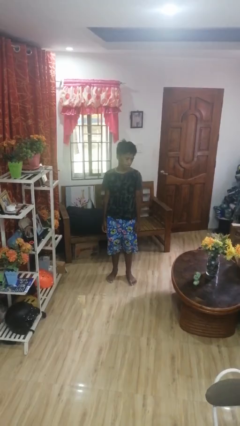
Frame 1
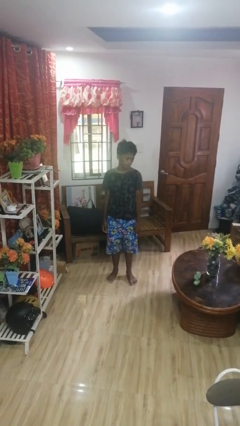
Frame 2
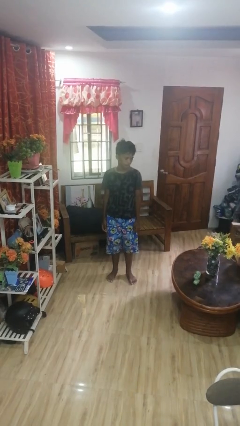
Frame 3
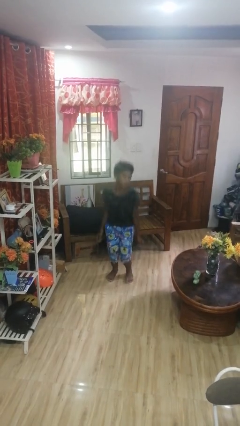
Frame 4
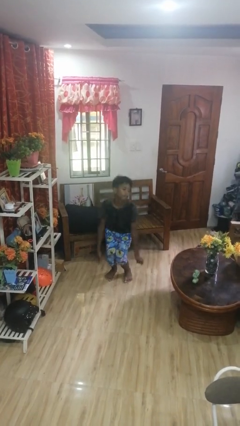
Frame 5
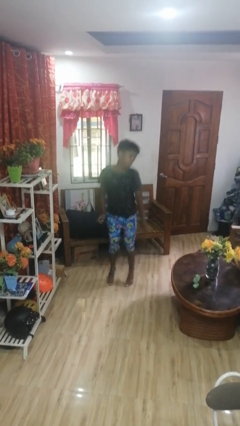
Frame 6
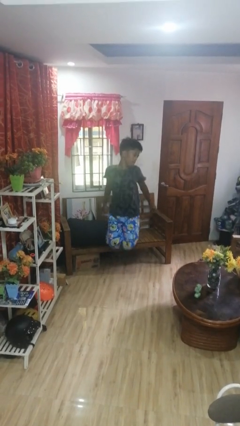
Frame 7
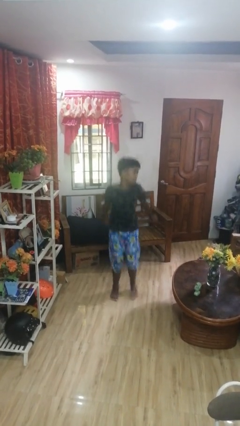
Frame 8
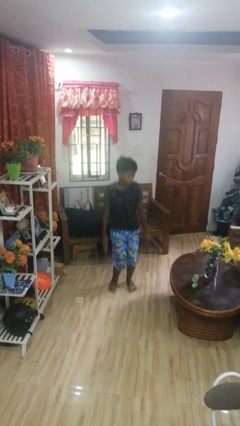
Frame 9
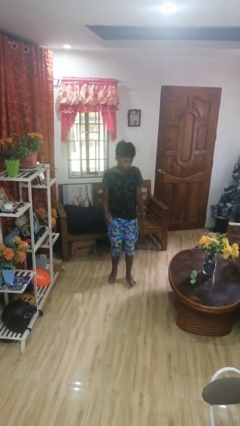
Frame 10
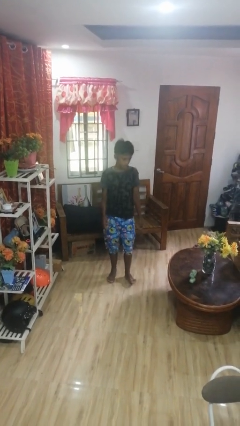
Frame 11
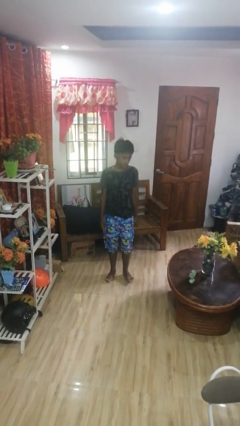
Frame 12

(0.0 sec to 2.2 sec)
person jumps

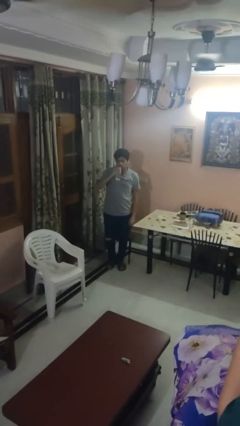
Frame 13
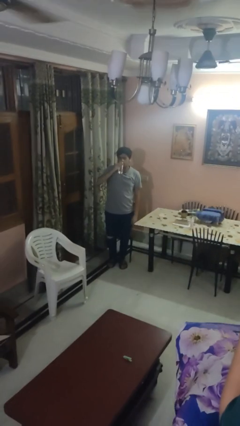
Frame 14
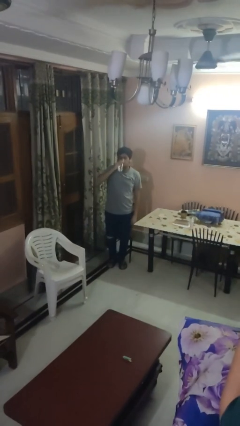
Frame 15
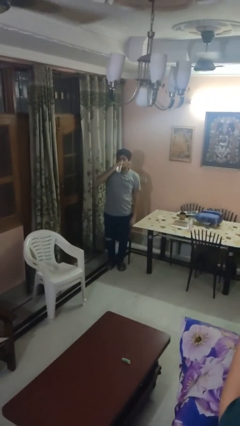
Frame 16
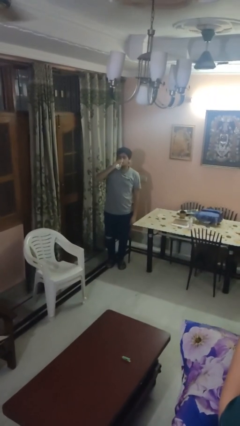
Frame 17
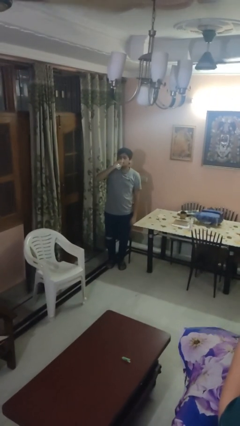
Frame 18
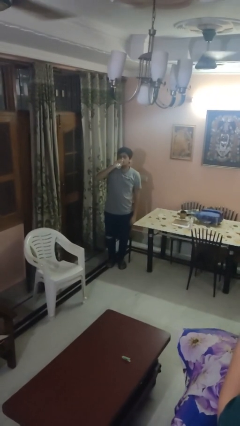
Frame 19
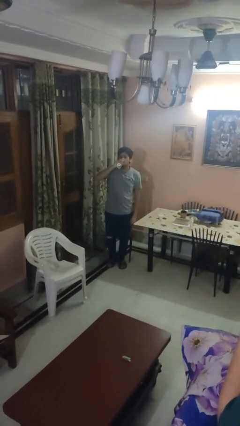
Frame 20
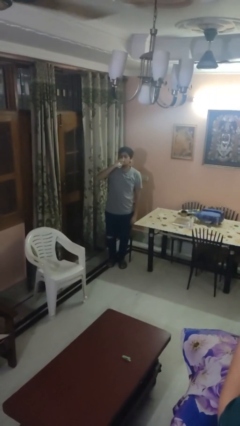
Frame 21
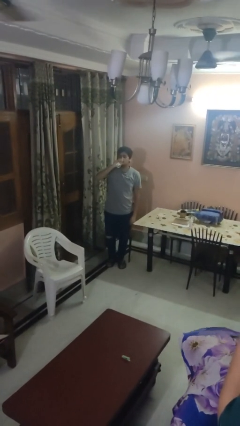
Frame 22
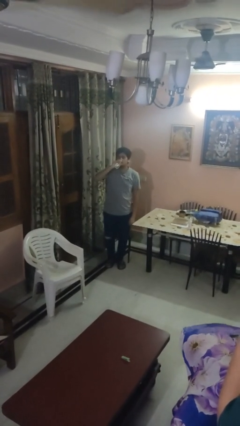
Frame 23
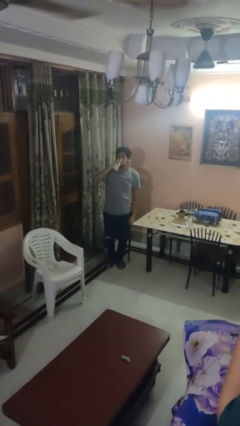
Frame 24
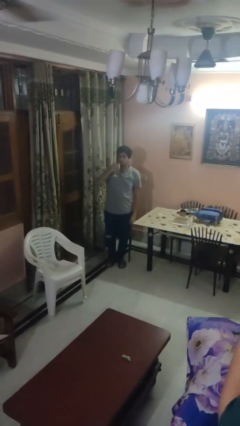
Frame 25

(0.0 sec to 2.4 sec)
person drinks from bottle

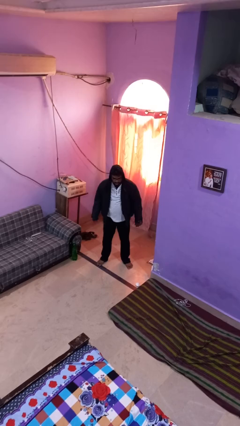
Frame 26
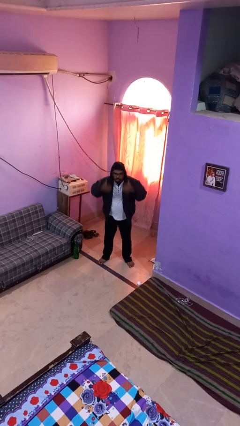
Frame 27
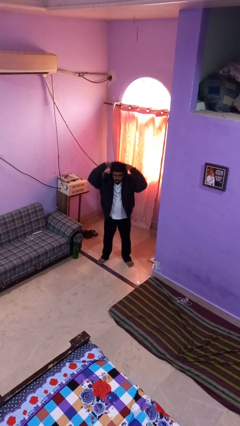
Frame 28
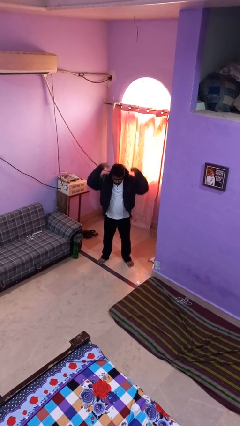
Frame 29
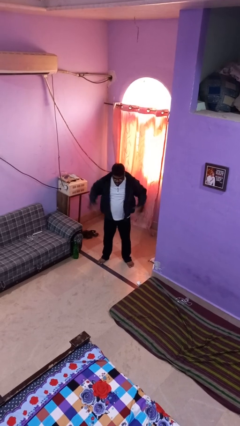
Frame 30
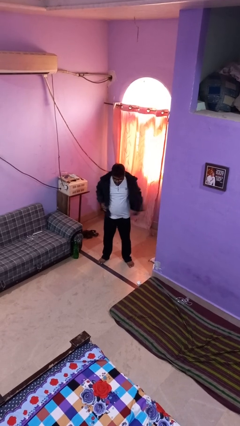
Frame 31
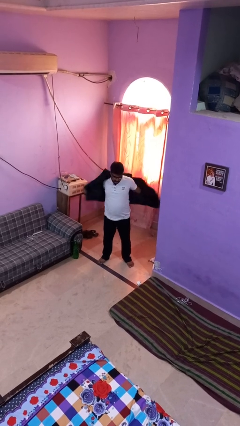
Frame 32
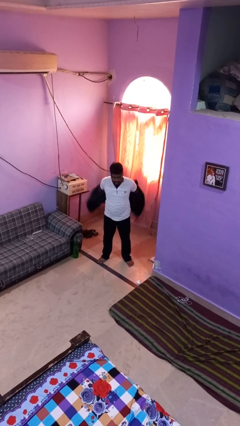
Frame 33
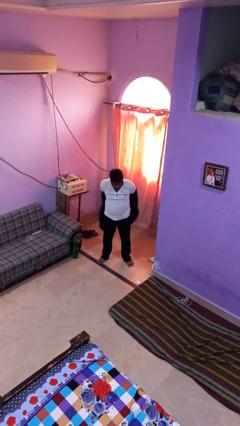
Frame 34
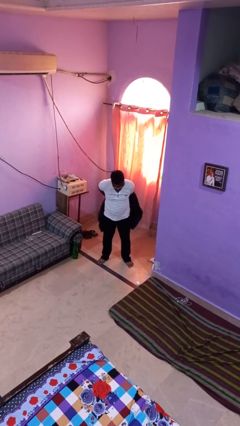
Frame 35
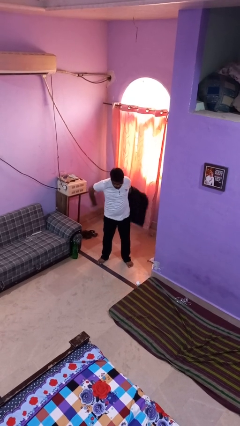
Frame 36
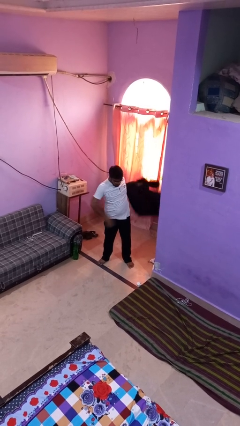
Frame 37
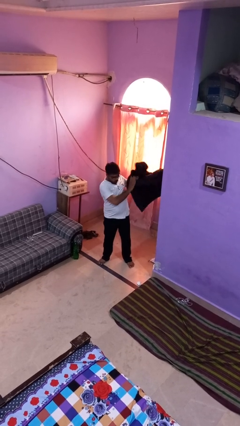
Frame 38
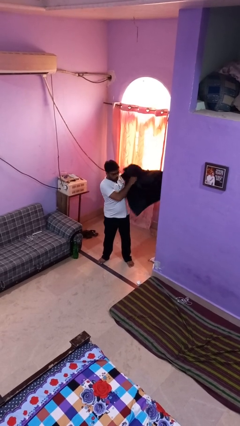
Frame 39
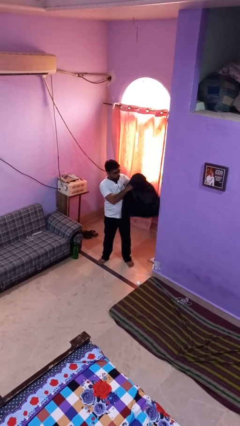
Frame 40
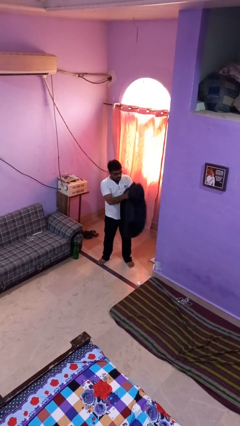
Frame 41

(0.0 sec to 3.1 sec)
person takes off hoodie

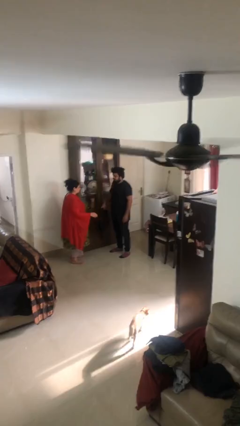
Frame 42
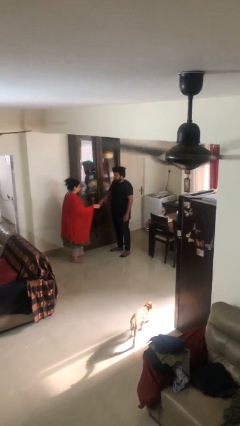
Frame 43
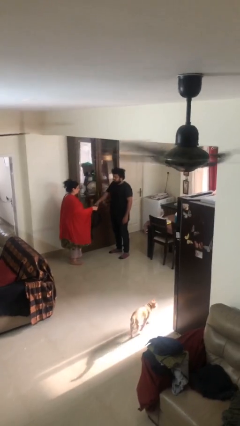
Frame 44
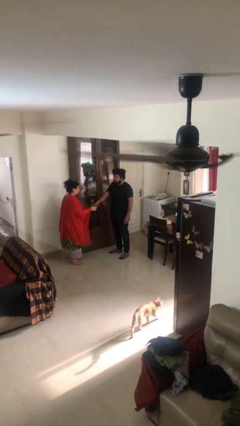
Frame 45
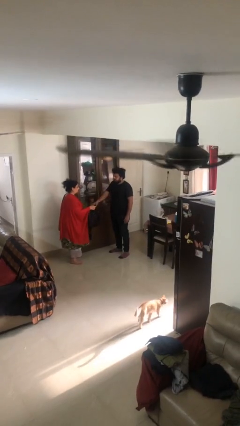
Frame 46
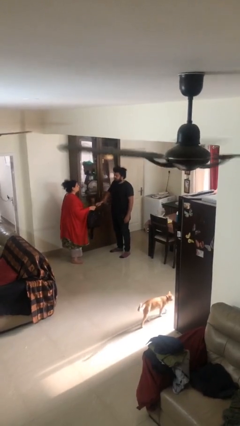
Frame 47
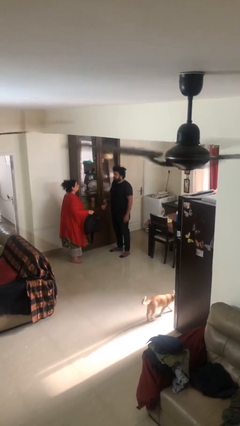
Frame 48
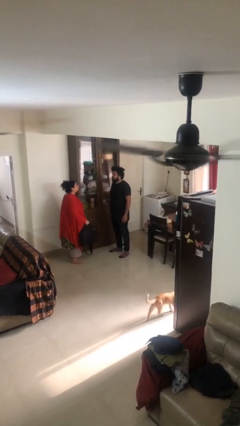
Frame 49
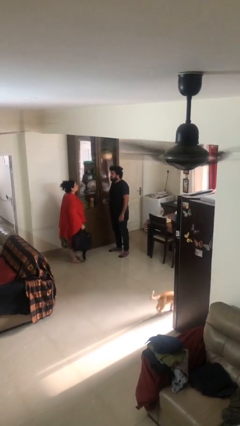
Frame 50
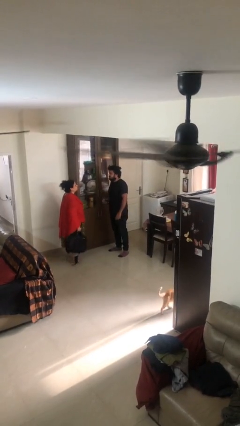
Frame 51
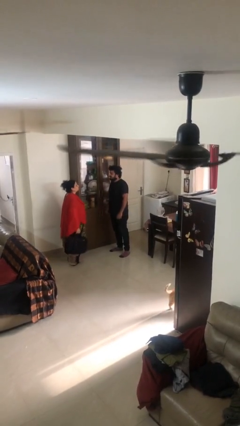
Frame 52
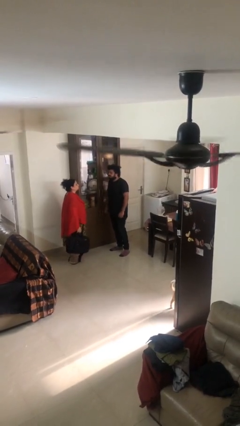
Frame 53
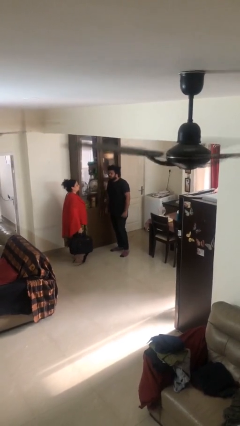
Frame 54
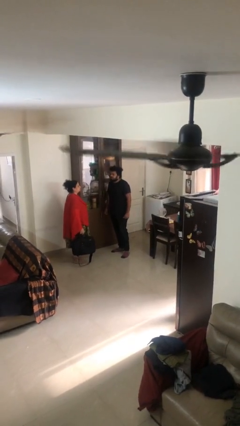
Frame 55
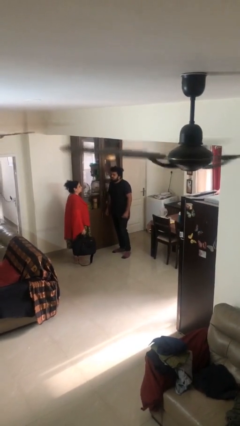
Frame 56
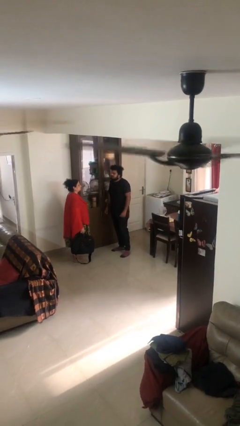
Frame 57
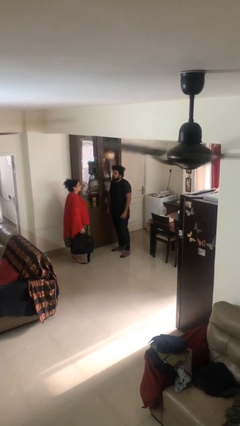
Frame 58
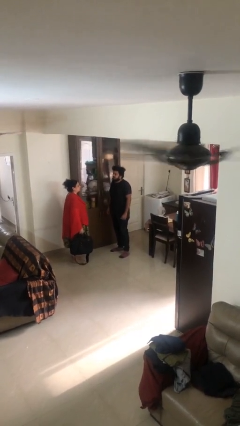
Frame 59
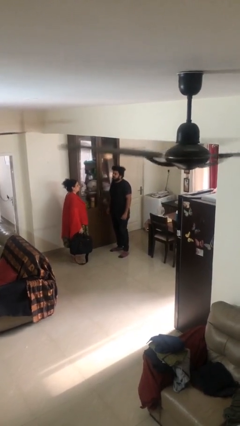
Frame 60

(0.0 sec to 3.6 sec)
person transfers object to person

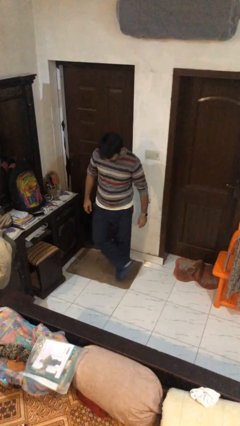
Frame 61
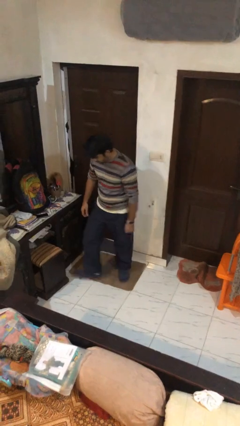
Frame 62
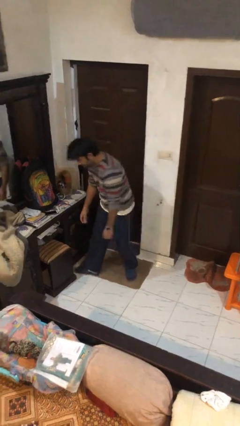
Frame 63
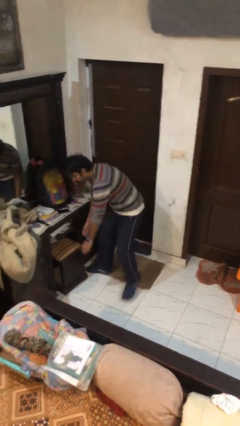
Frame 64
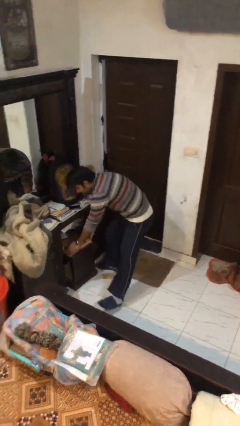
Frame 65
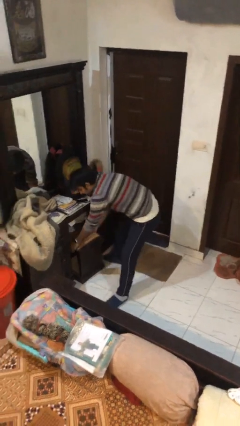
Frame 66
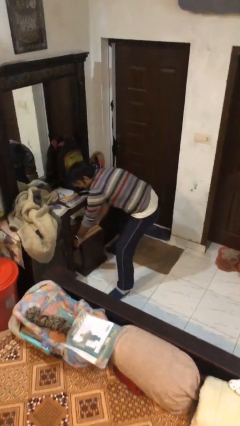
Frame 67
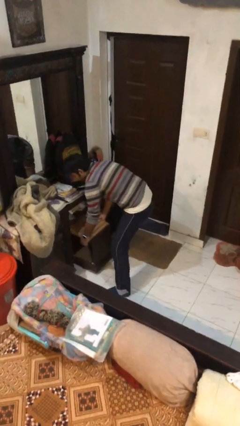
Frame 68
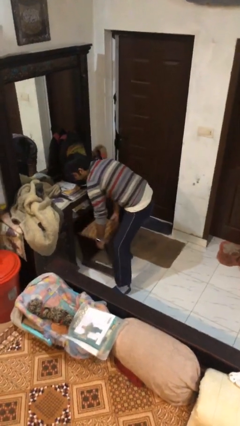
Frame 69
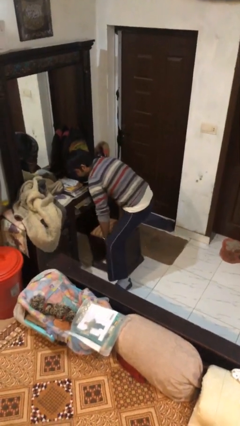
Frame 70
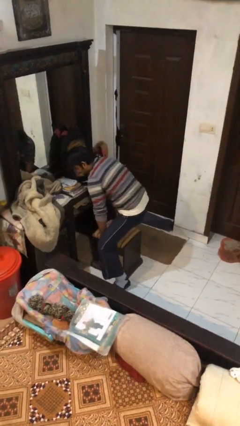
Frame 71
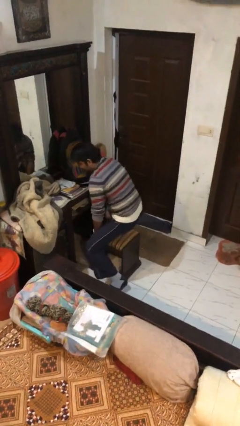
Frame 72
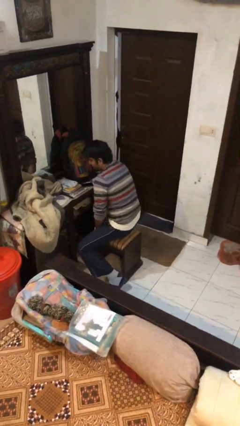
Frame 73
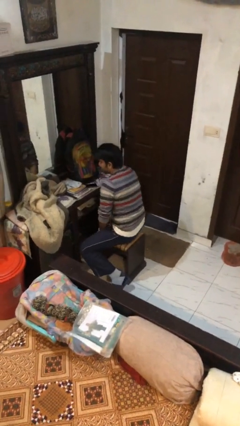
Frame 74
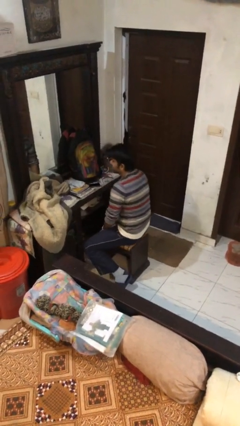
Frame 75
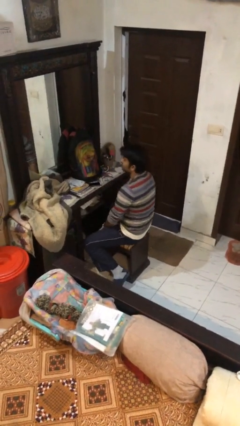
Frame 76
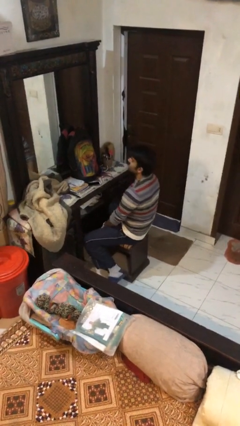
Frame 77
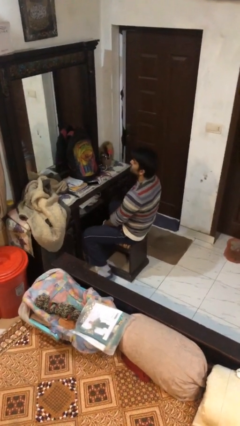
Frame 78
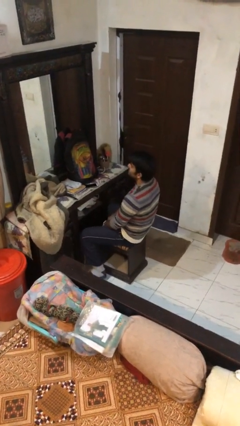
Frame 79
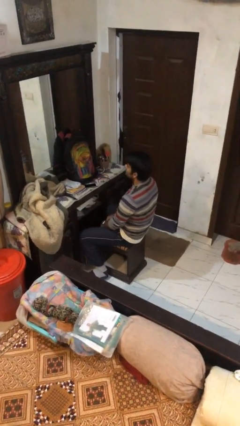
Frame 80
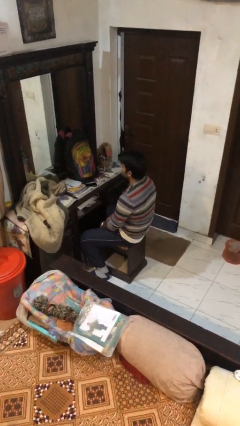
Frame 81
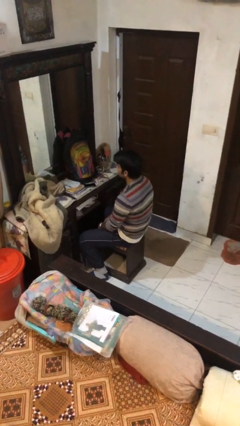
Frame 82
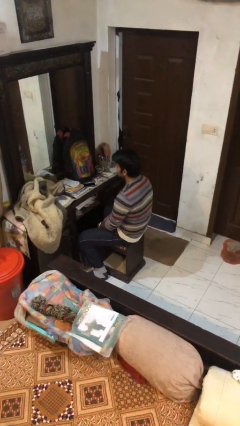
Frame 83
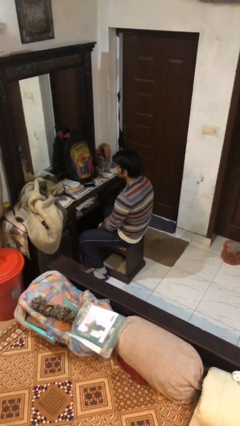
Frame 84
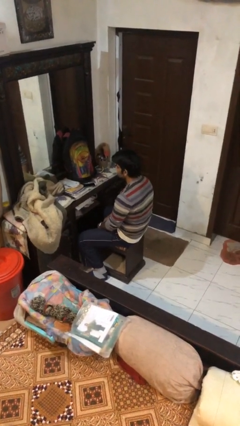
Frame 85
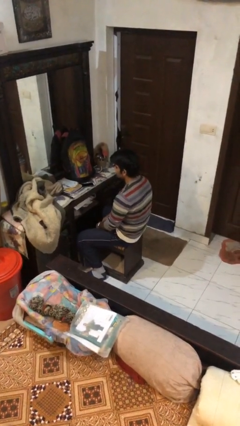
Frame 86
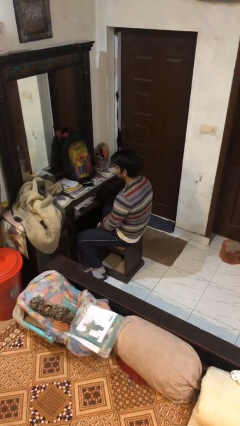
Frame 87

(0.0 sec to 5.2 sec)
person sits down

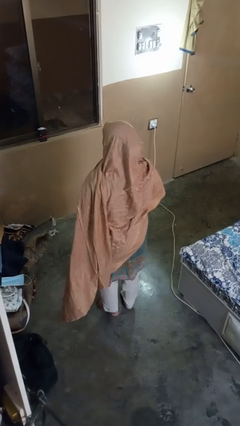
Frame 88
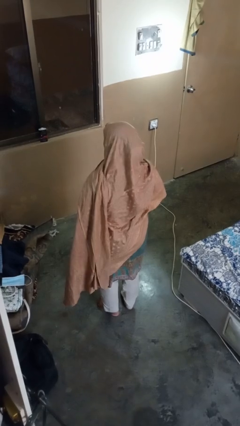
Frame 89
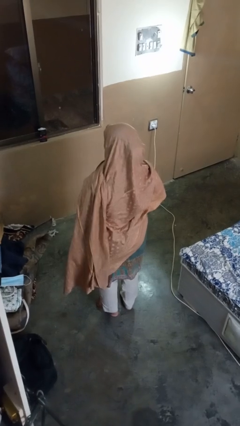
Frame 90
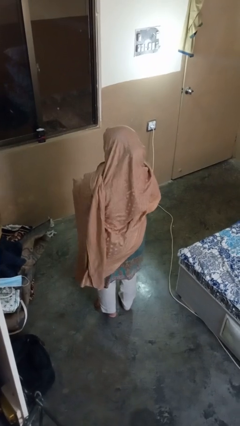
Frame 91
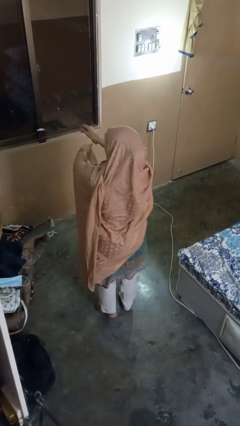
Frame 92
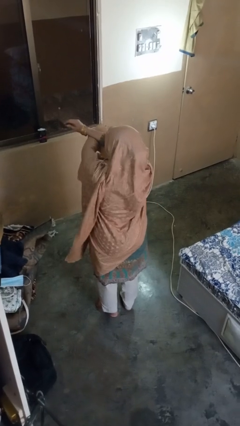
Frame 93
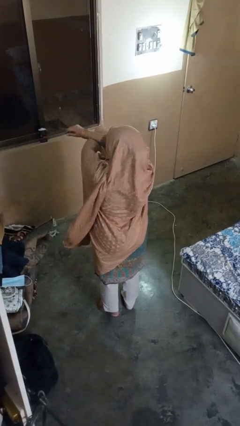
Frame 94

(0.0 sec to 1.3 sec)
person crosses arms
